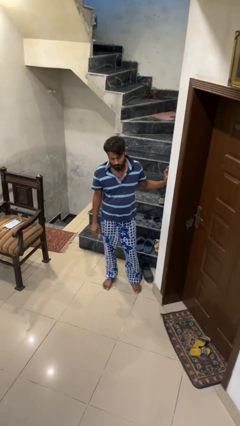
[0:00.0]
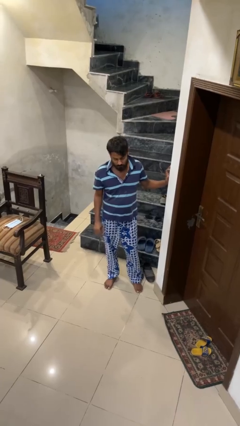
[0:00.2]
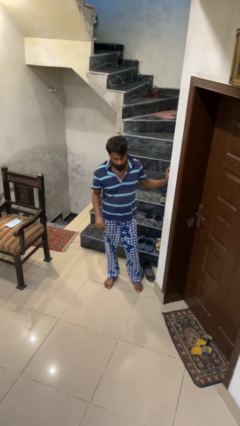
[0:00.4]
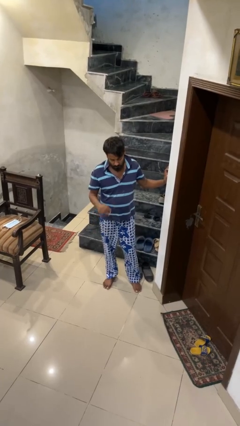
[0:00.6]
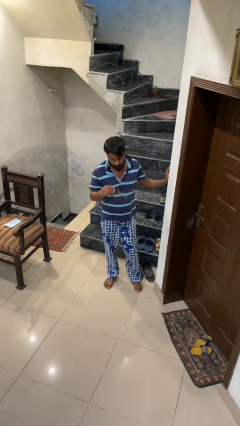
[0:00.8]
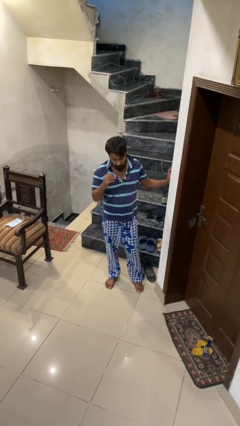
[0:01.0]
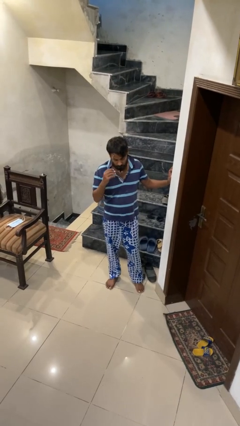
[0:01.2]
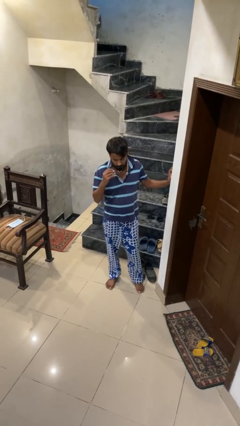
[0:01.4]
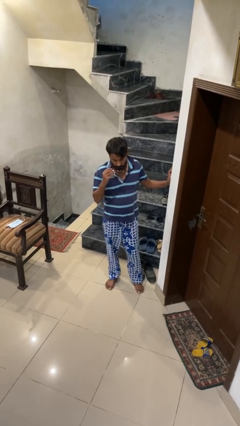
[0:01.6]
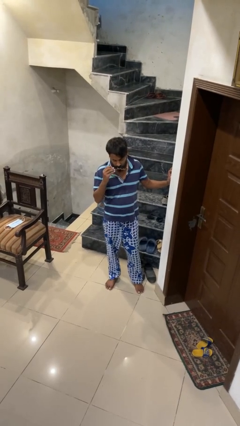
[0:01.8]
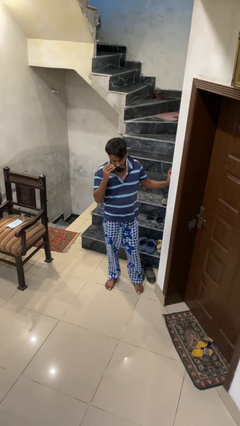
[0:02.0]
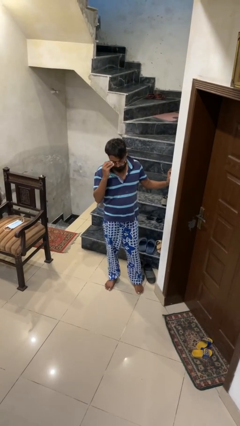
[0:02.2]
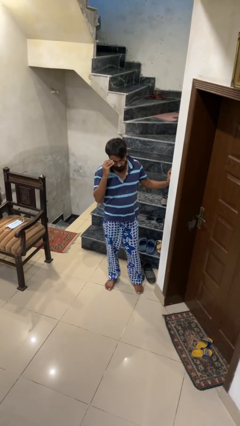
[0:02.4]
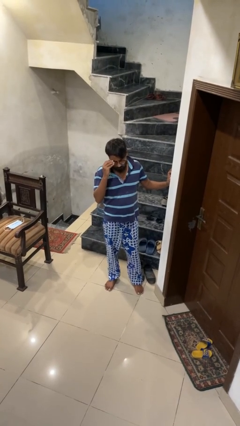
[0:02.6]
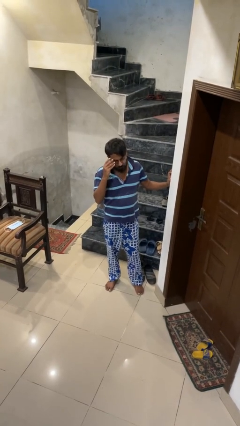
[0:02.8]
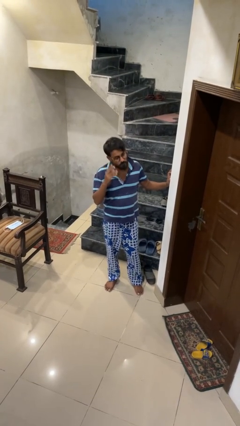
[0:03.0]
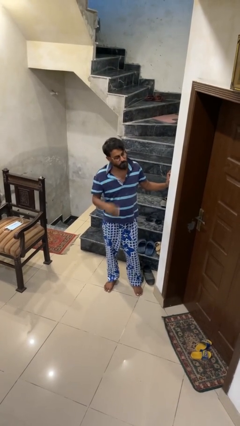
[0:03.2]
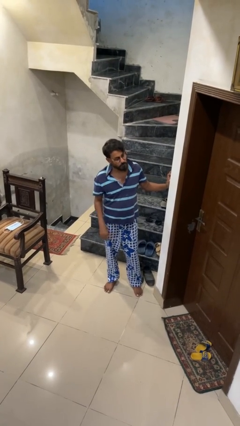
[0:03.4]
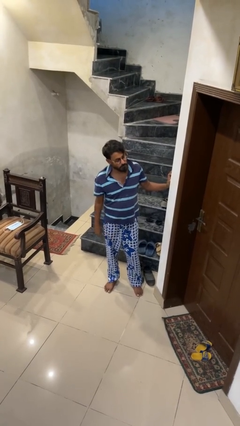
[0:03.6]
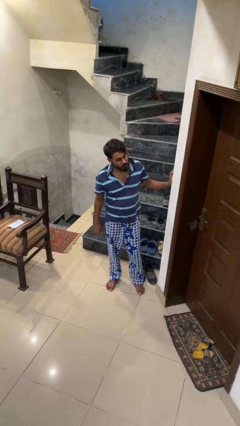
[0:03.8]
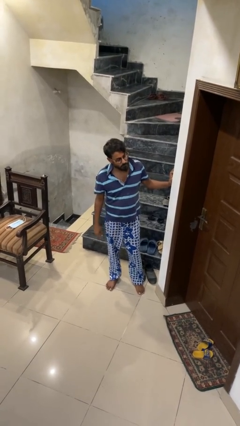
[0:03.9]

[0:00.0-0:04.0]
person puts on glasses

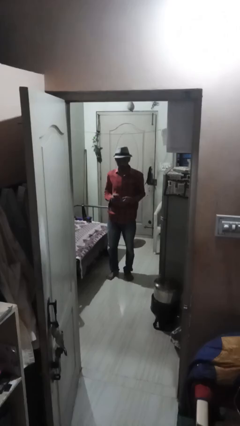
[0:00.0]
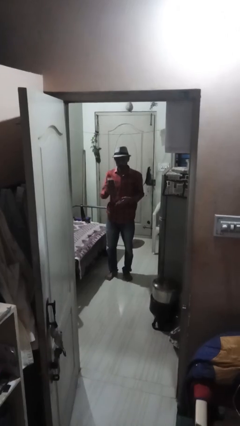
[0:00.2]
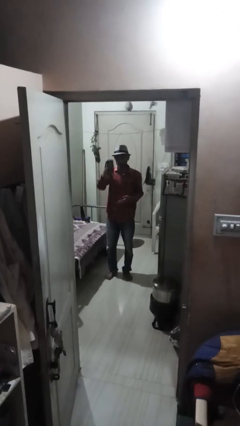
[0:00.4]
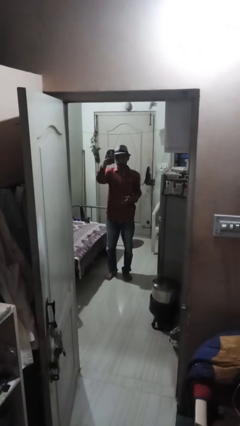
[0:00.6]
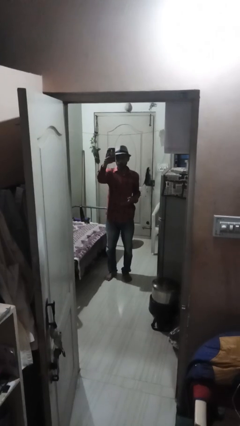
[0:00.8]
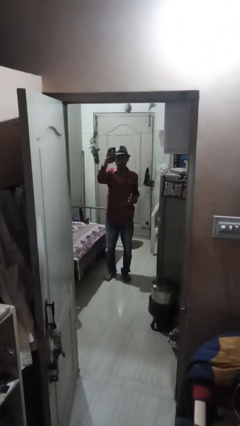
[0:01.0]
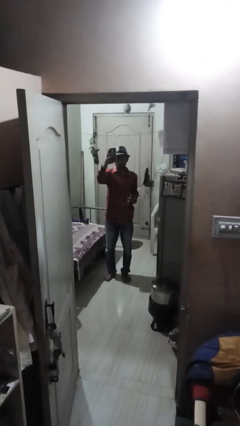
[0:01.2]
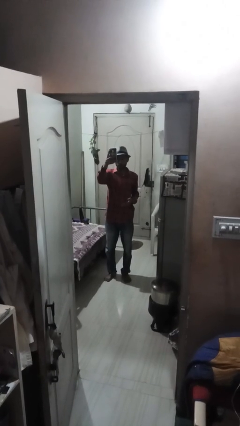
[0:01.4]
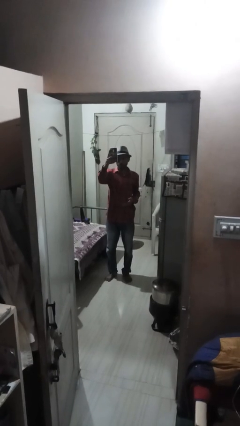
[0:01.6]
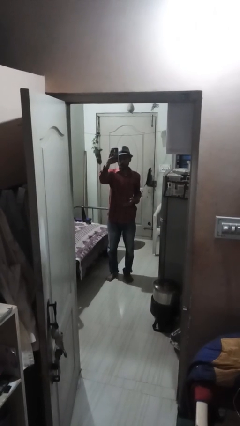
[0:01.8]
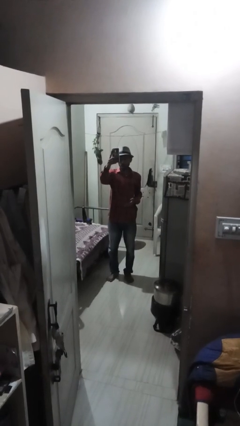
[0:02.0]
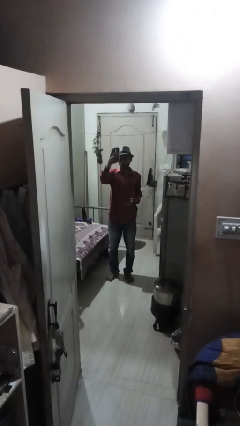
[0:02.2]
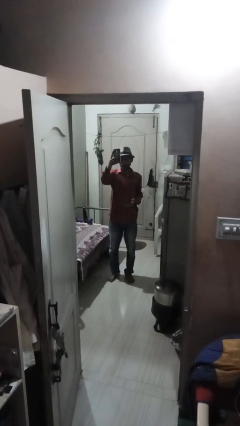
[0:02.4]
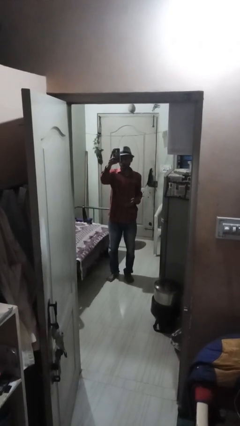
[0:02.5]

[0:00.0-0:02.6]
person takes selfie

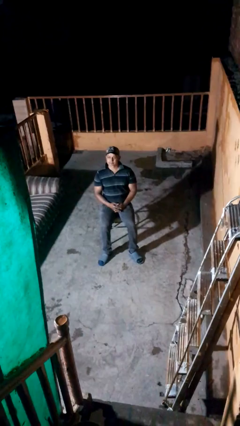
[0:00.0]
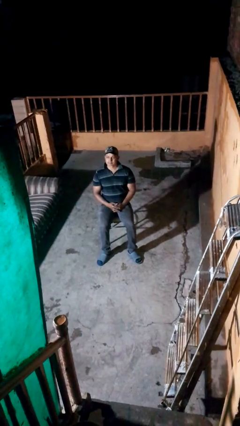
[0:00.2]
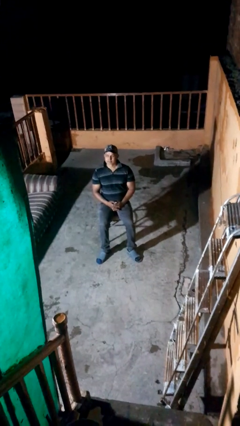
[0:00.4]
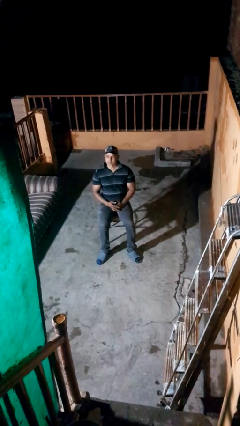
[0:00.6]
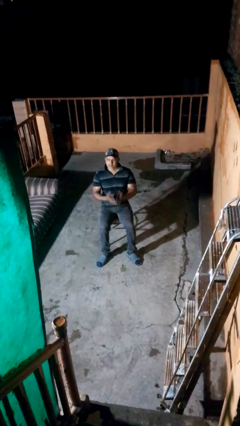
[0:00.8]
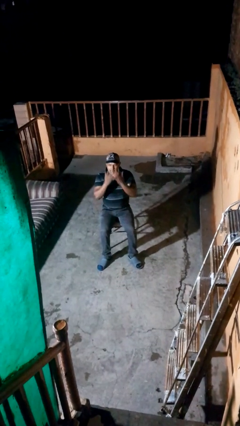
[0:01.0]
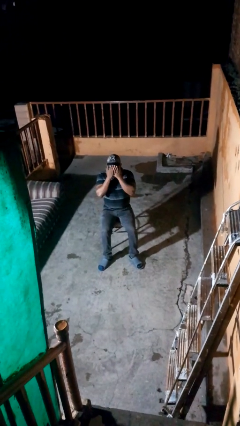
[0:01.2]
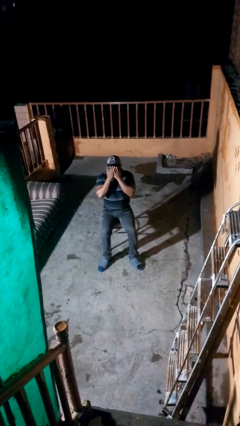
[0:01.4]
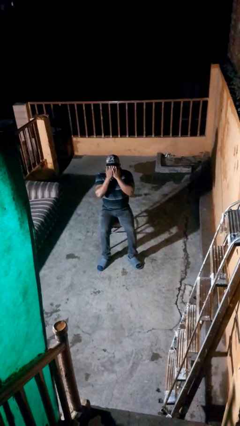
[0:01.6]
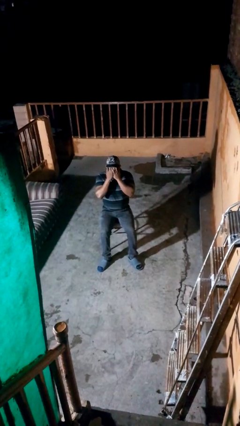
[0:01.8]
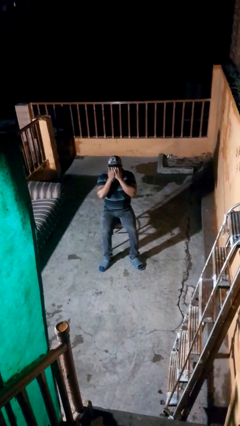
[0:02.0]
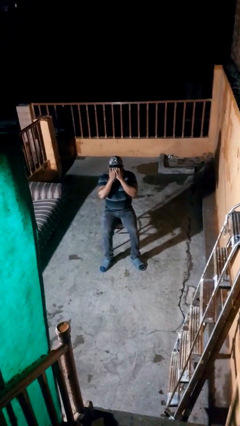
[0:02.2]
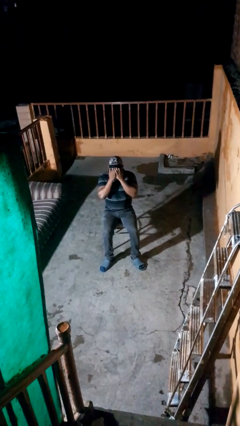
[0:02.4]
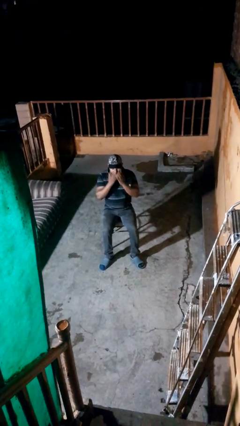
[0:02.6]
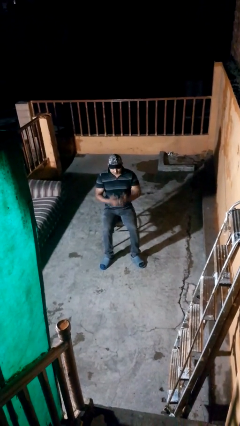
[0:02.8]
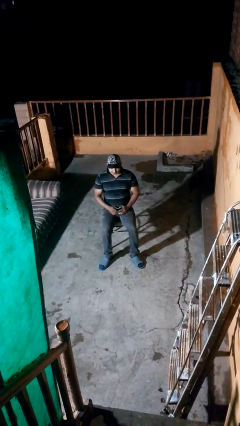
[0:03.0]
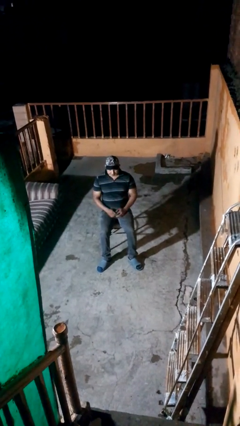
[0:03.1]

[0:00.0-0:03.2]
person covers face with hands

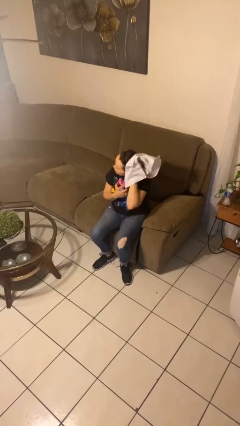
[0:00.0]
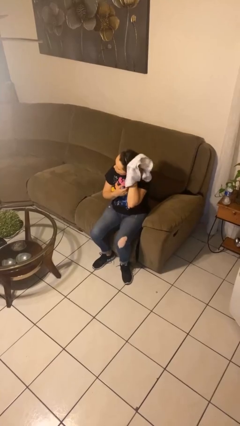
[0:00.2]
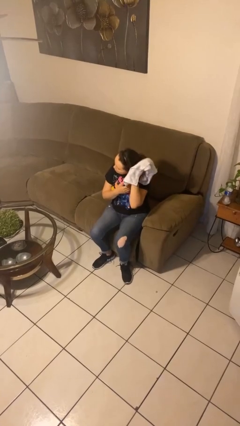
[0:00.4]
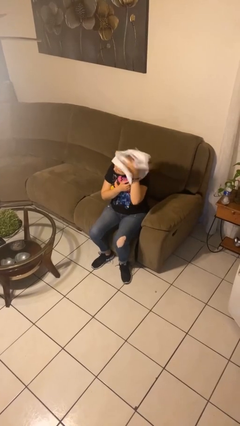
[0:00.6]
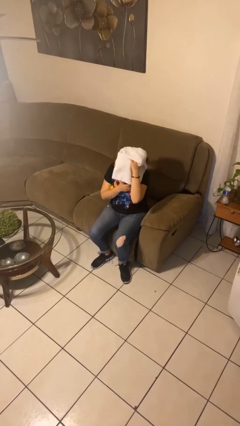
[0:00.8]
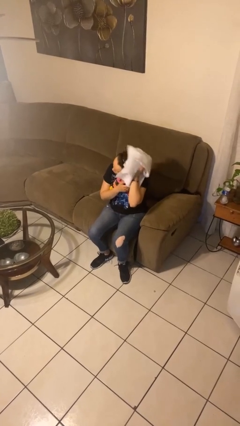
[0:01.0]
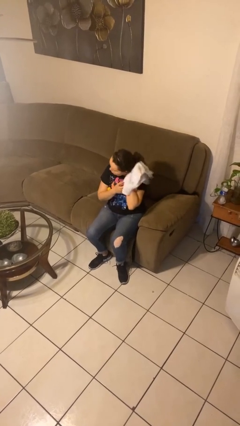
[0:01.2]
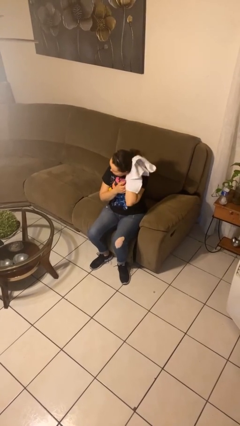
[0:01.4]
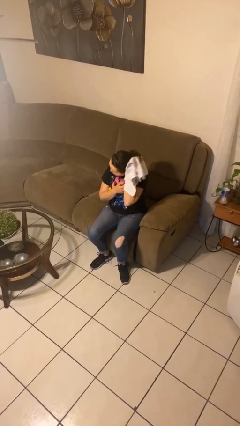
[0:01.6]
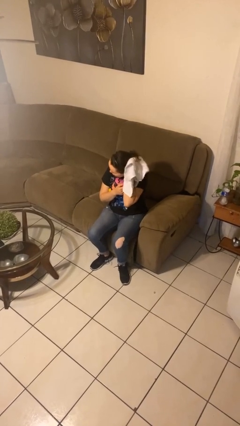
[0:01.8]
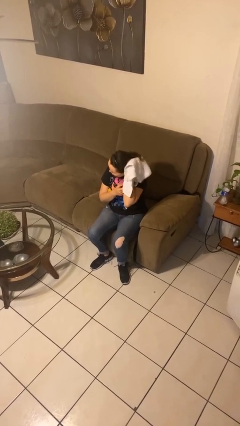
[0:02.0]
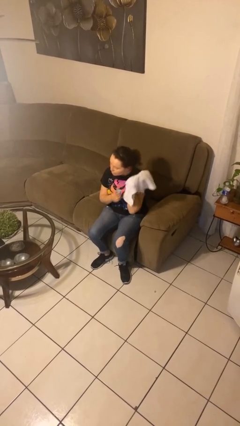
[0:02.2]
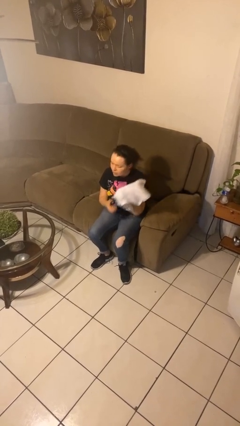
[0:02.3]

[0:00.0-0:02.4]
person dries hair with towel

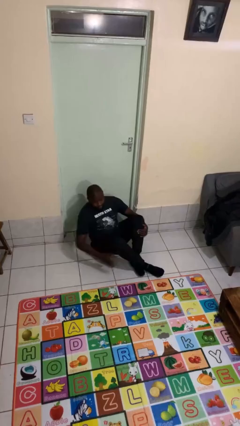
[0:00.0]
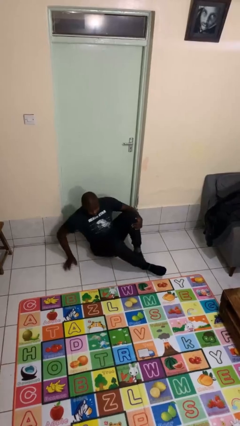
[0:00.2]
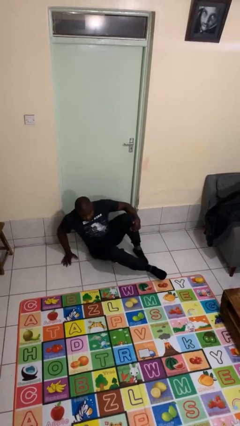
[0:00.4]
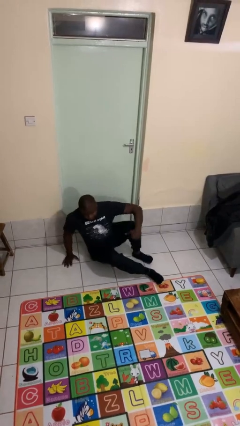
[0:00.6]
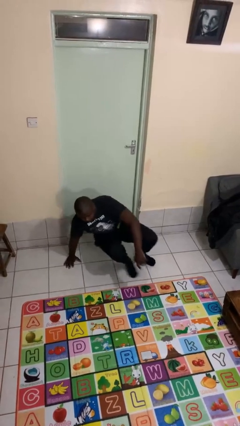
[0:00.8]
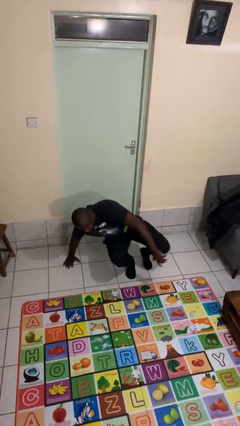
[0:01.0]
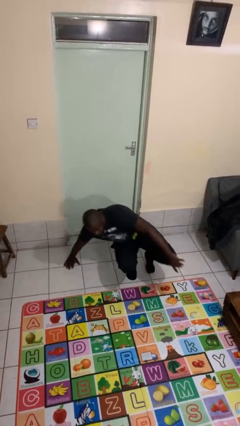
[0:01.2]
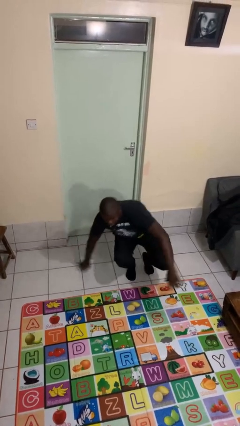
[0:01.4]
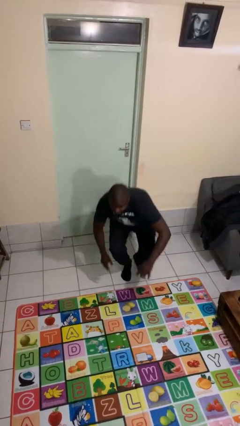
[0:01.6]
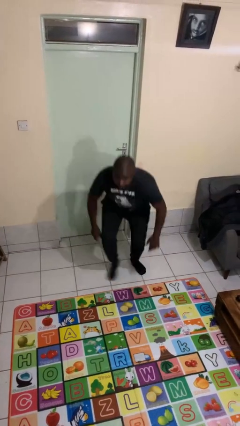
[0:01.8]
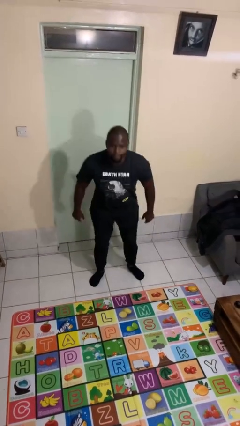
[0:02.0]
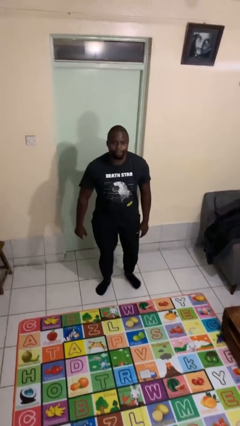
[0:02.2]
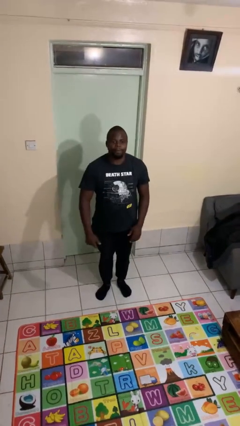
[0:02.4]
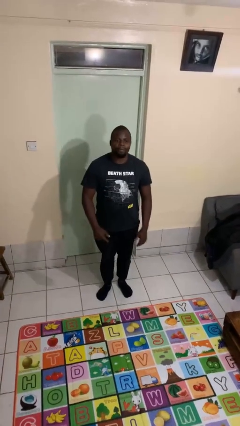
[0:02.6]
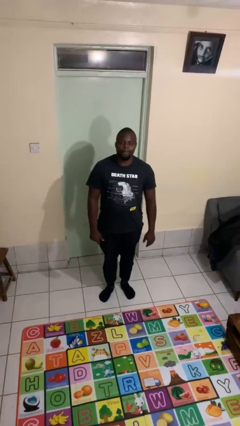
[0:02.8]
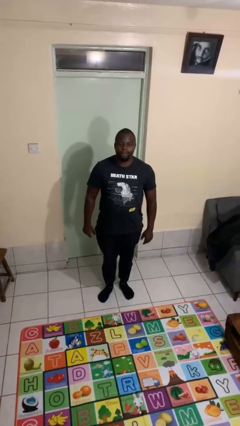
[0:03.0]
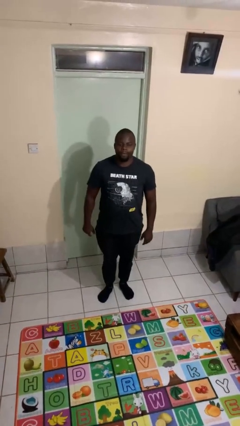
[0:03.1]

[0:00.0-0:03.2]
person stands up from floor

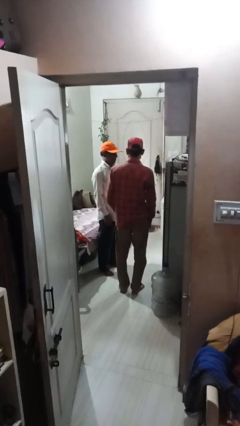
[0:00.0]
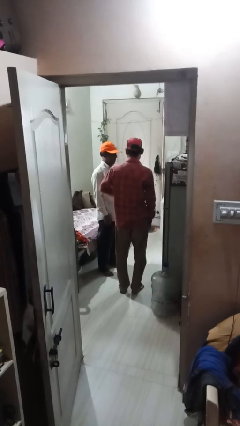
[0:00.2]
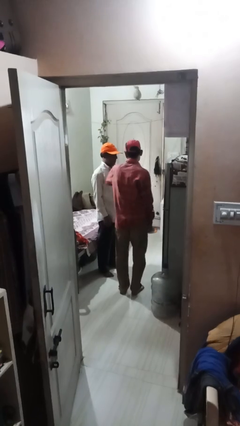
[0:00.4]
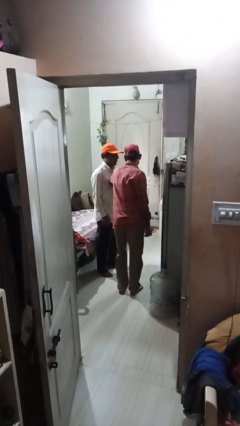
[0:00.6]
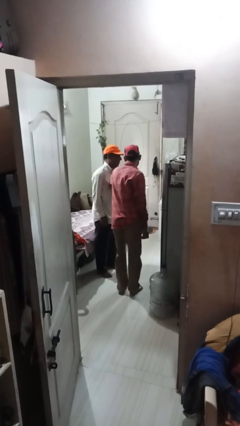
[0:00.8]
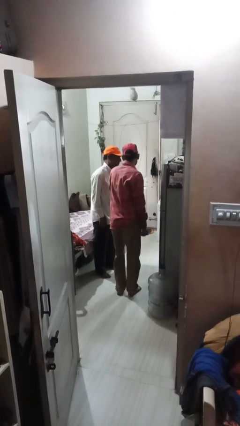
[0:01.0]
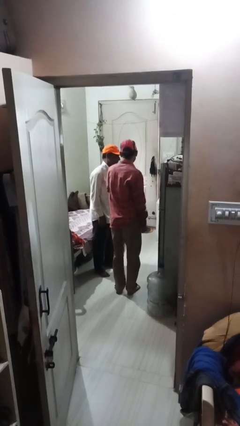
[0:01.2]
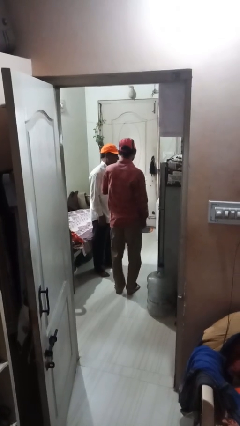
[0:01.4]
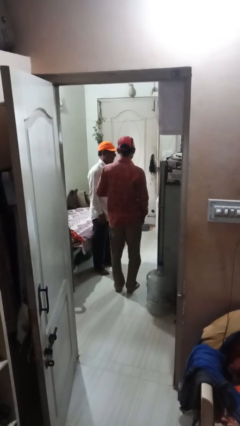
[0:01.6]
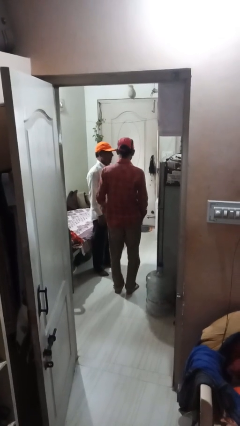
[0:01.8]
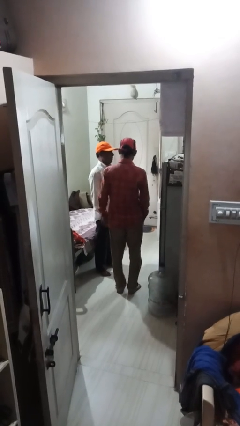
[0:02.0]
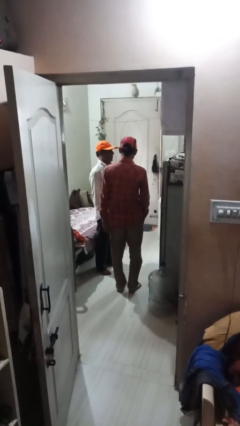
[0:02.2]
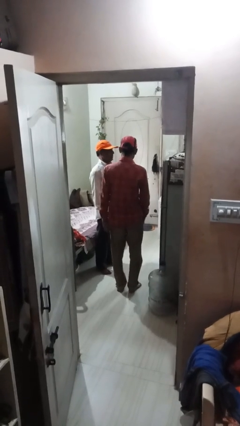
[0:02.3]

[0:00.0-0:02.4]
person nudges person with elbow
